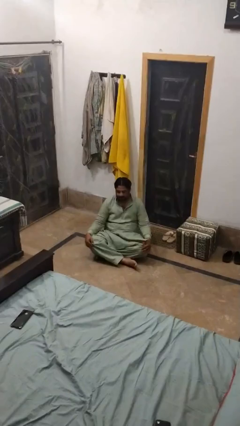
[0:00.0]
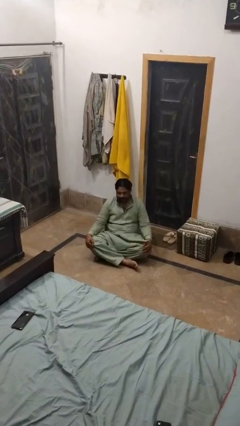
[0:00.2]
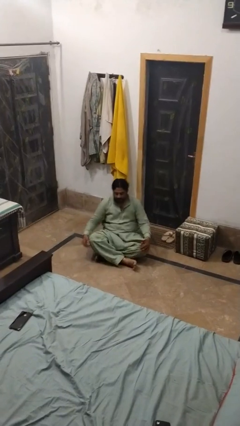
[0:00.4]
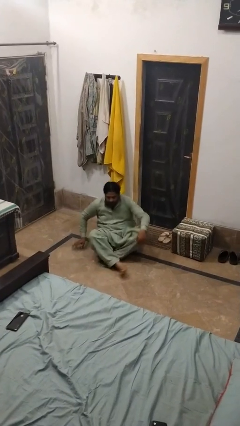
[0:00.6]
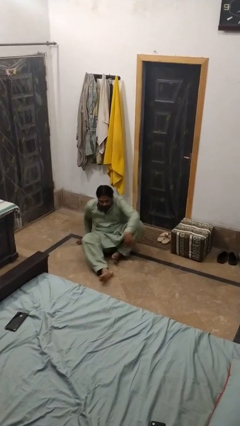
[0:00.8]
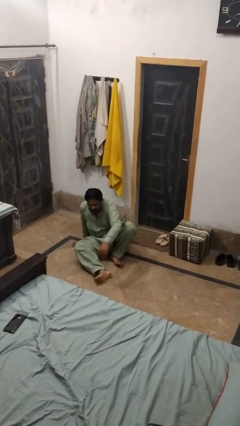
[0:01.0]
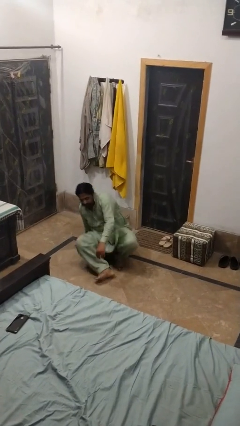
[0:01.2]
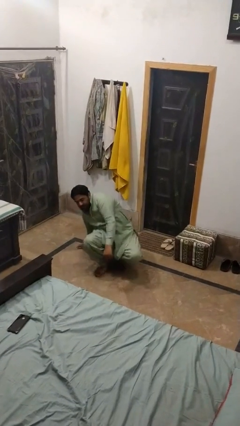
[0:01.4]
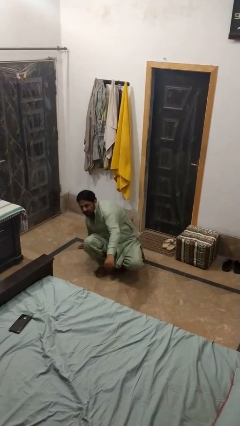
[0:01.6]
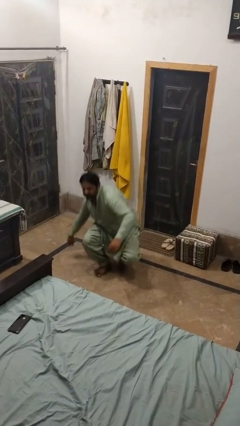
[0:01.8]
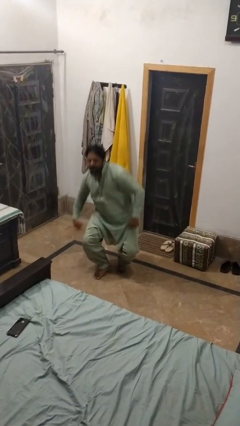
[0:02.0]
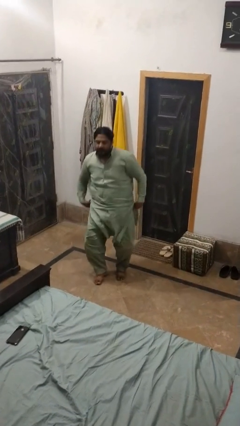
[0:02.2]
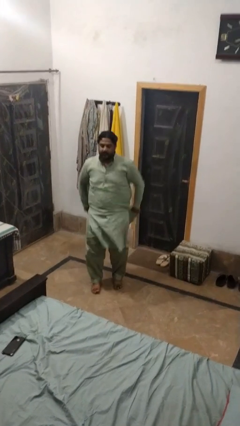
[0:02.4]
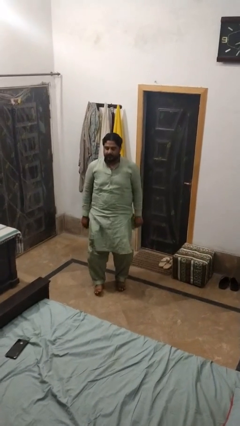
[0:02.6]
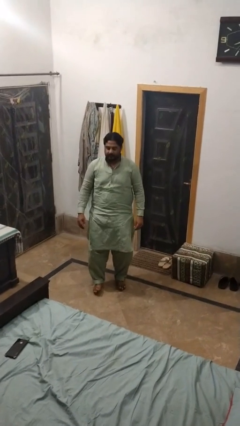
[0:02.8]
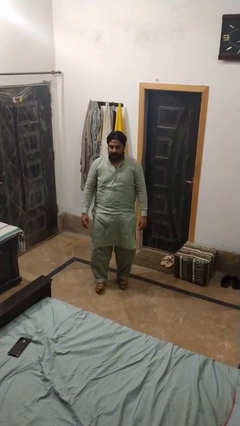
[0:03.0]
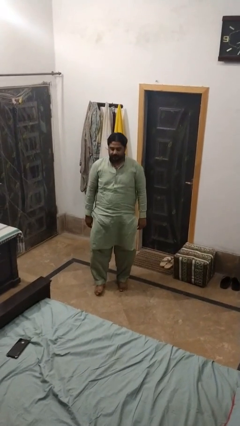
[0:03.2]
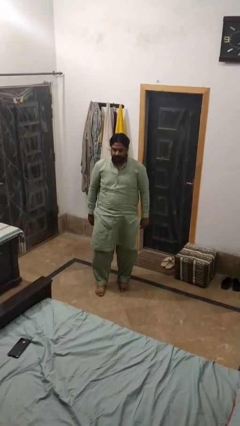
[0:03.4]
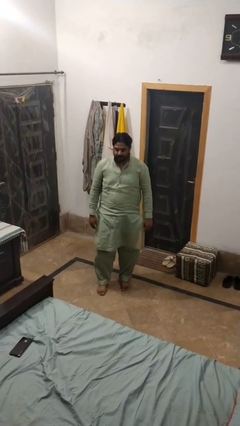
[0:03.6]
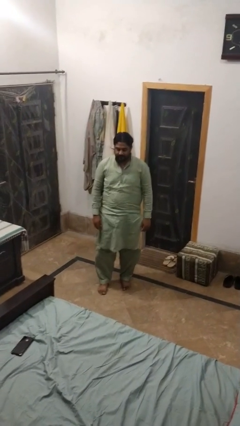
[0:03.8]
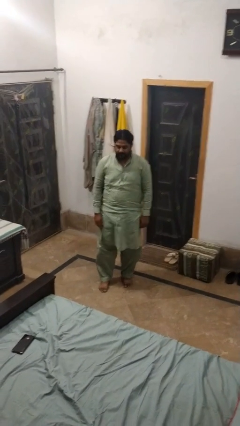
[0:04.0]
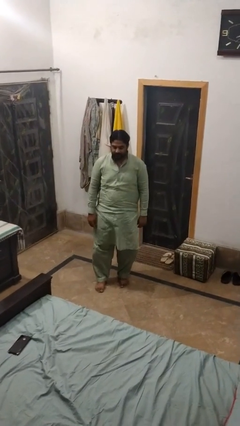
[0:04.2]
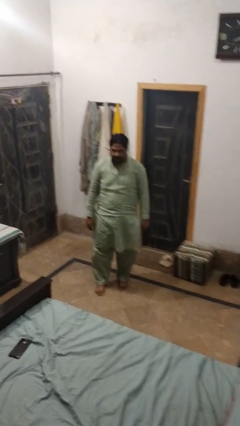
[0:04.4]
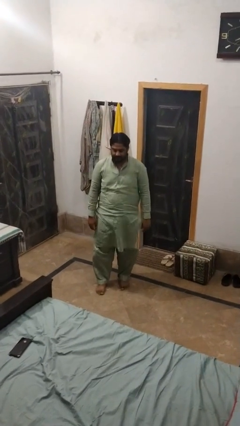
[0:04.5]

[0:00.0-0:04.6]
person stands up from floor

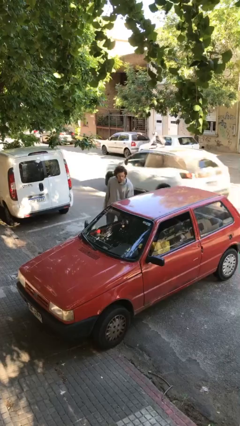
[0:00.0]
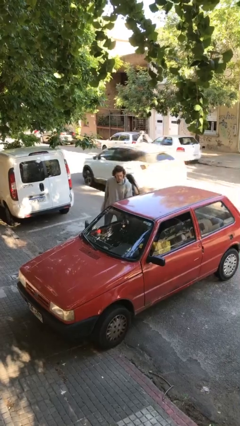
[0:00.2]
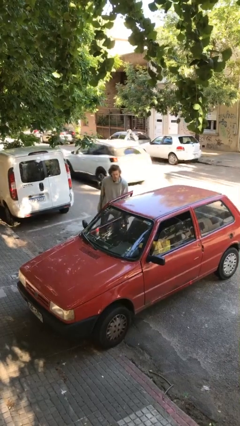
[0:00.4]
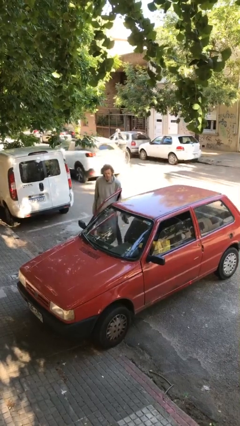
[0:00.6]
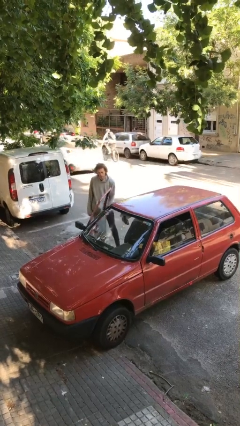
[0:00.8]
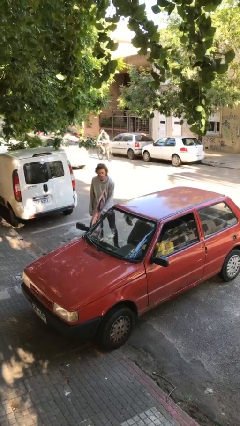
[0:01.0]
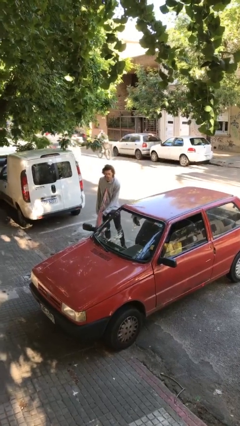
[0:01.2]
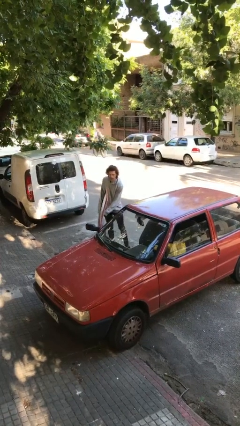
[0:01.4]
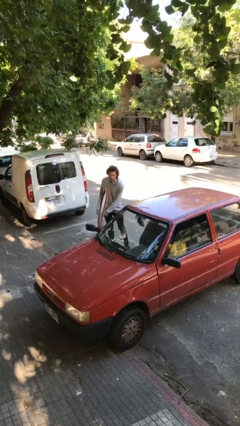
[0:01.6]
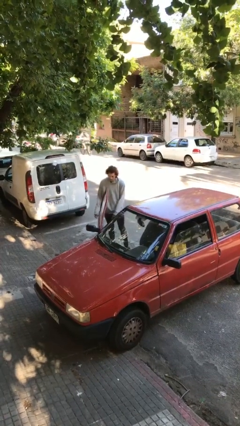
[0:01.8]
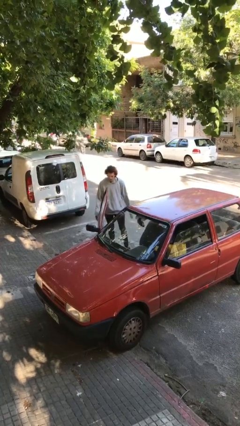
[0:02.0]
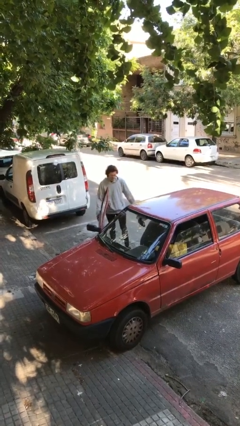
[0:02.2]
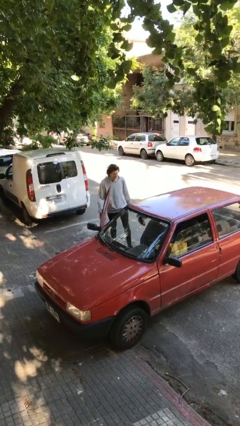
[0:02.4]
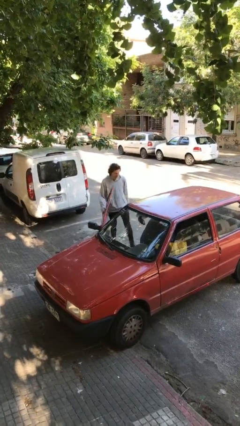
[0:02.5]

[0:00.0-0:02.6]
person opens car door

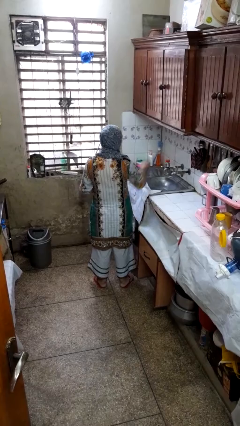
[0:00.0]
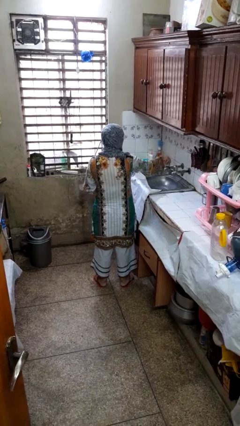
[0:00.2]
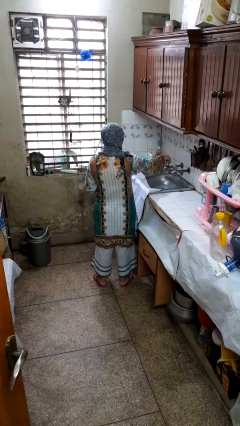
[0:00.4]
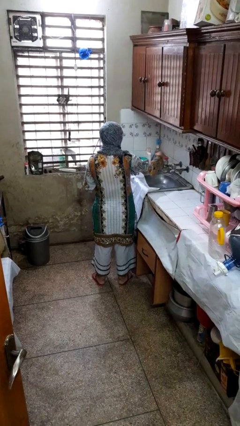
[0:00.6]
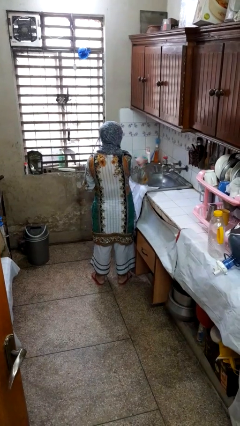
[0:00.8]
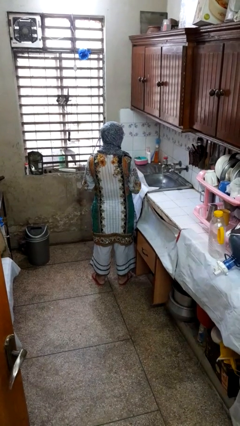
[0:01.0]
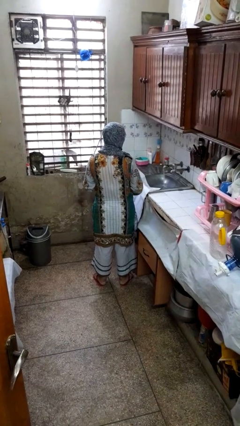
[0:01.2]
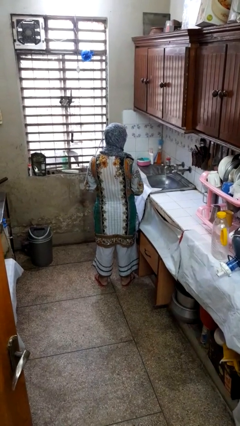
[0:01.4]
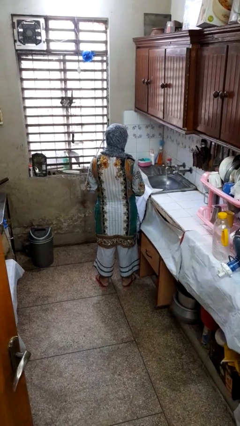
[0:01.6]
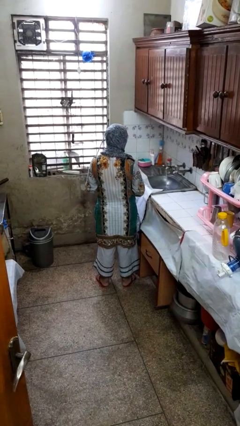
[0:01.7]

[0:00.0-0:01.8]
person turns on faucet

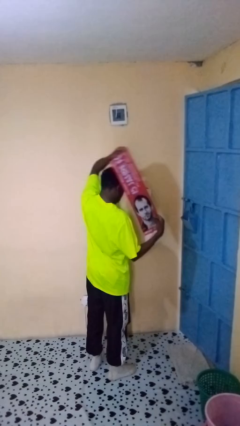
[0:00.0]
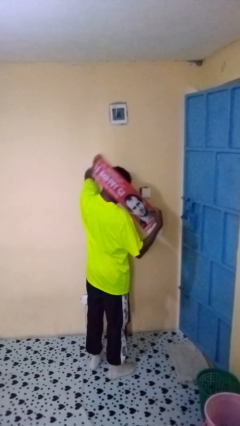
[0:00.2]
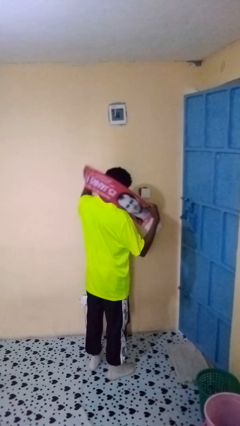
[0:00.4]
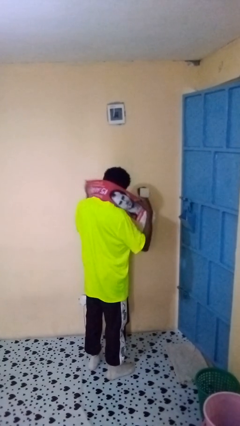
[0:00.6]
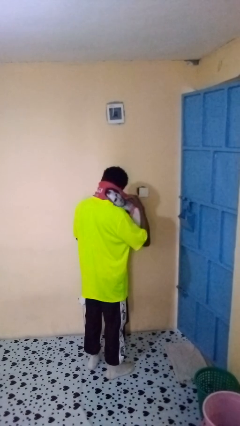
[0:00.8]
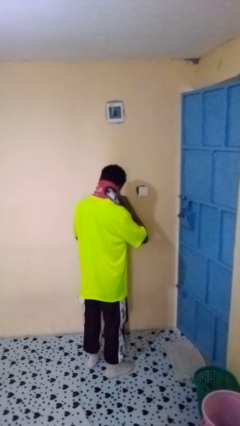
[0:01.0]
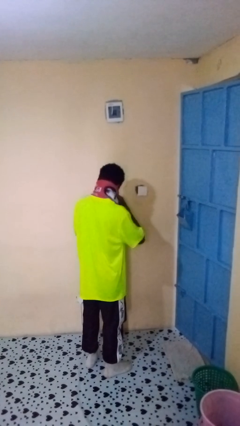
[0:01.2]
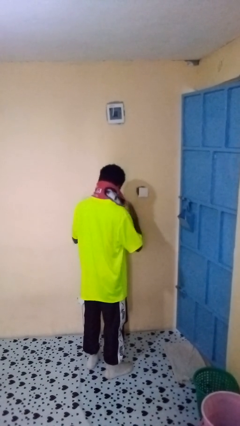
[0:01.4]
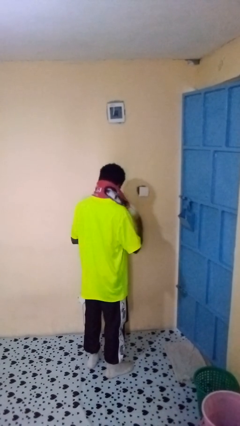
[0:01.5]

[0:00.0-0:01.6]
person puts on scarf

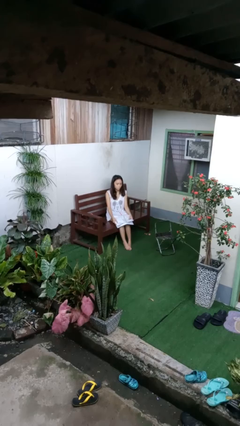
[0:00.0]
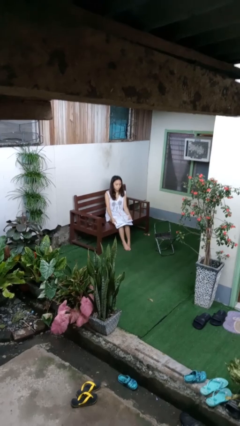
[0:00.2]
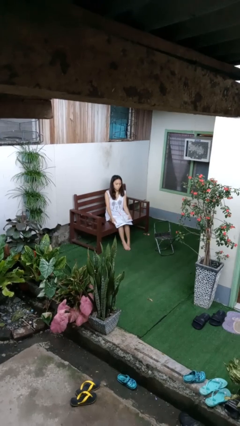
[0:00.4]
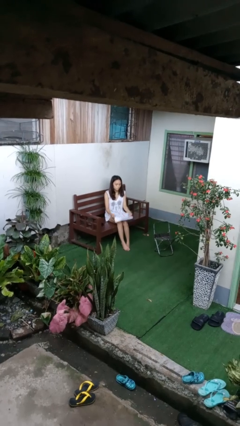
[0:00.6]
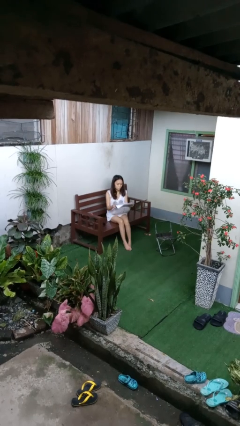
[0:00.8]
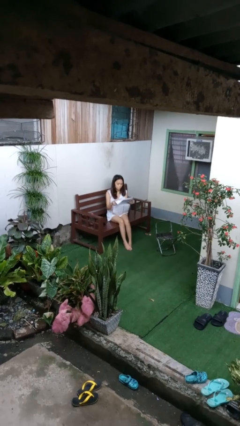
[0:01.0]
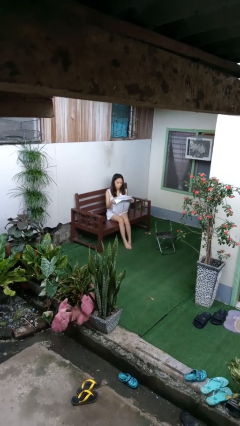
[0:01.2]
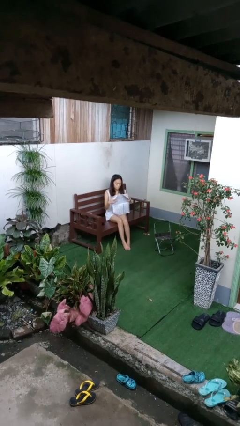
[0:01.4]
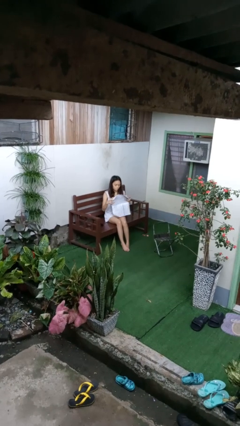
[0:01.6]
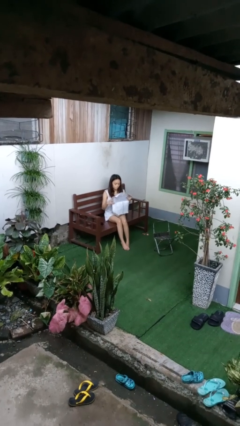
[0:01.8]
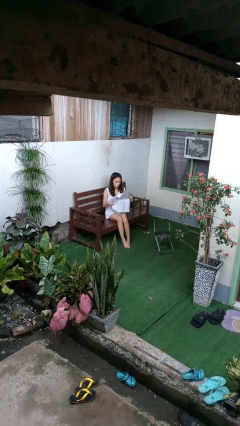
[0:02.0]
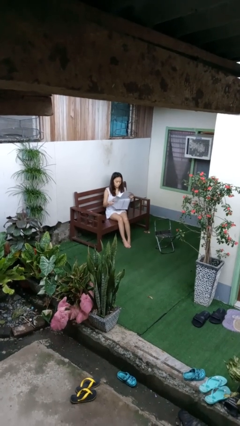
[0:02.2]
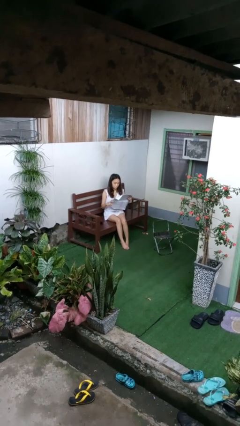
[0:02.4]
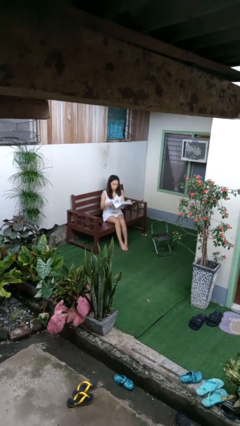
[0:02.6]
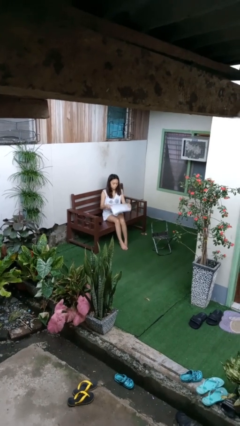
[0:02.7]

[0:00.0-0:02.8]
person reads newspaper

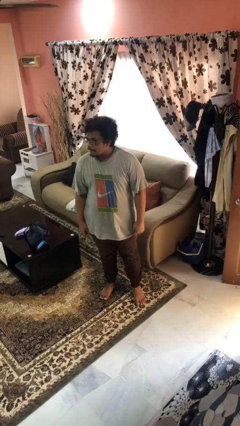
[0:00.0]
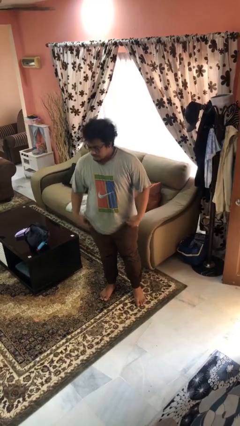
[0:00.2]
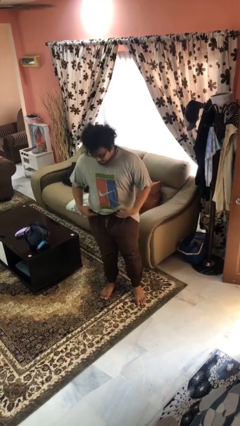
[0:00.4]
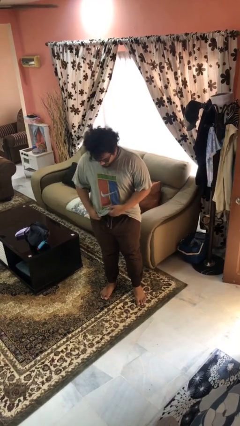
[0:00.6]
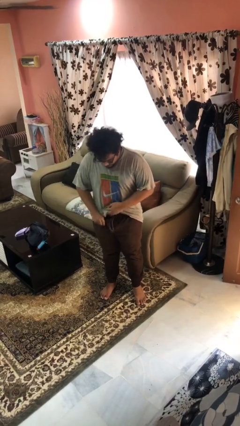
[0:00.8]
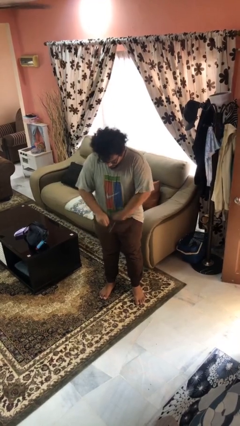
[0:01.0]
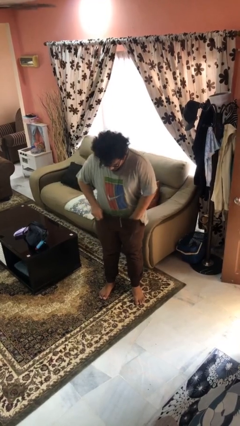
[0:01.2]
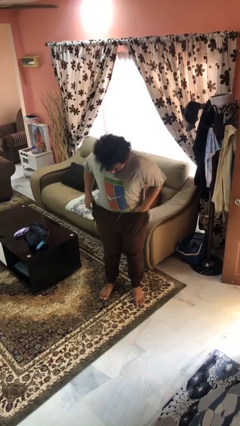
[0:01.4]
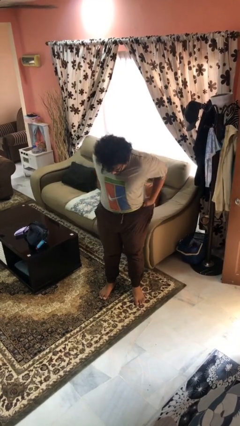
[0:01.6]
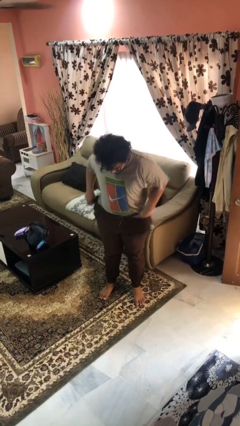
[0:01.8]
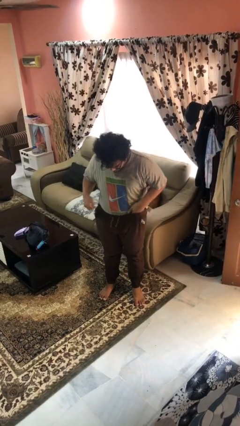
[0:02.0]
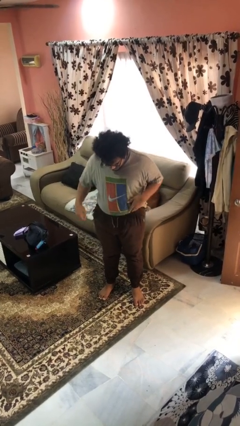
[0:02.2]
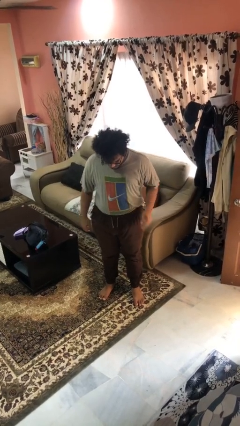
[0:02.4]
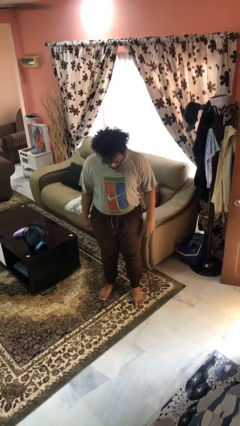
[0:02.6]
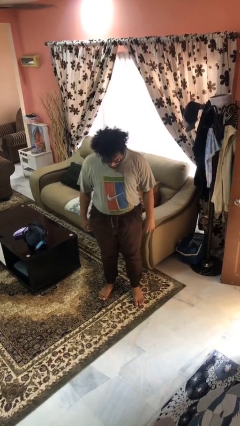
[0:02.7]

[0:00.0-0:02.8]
person tucks in shirt

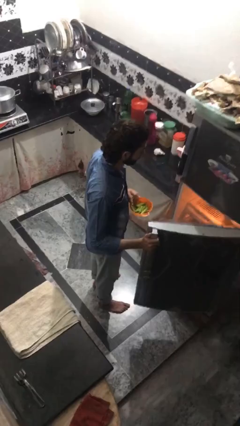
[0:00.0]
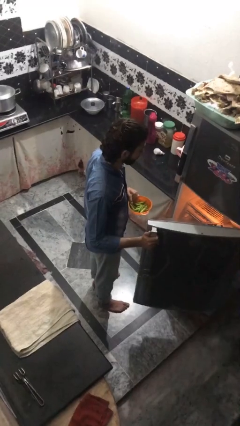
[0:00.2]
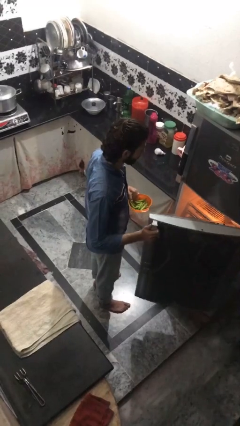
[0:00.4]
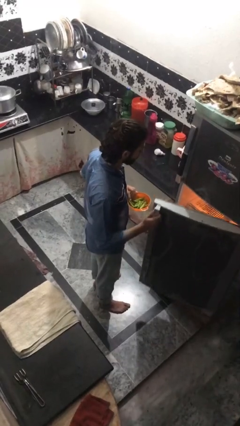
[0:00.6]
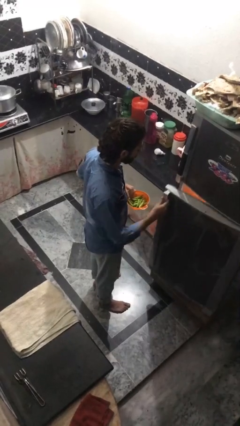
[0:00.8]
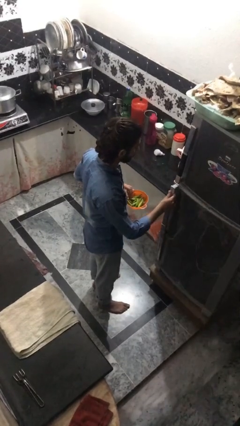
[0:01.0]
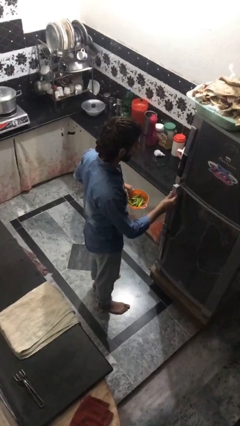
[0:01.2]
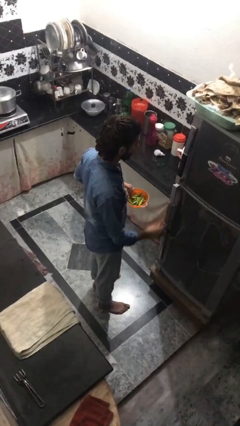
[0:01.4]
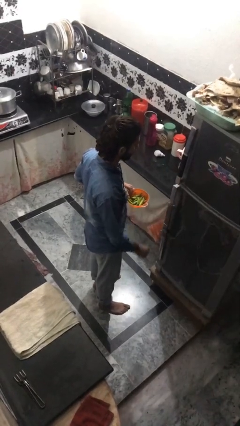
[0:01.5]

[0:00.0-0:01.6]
person closes refrigerator
